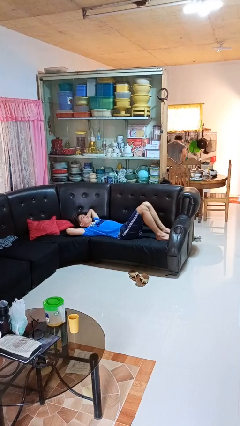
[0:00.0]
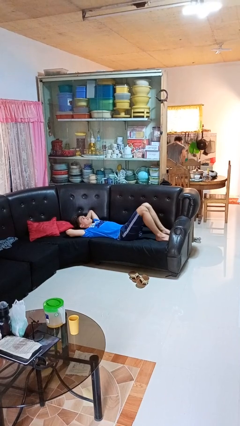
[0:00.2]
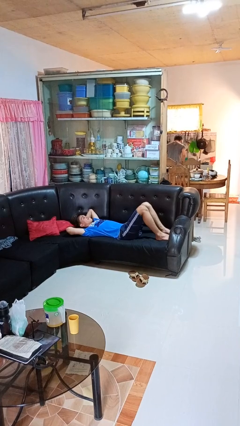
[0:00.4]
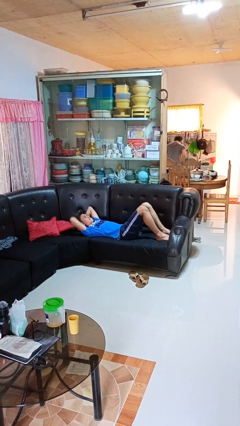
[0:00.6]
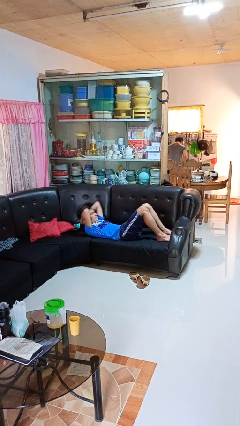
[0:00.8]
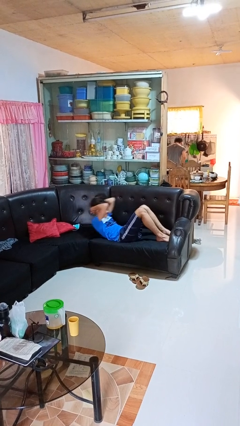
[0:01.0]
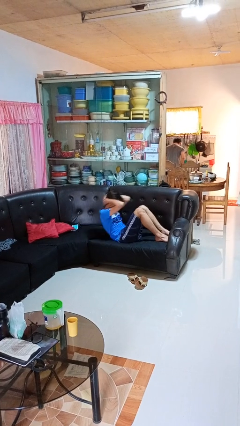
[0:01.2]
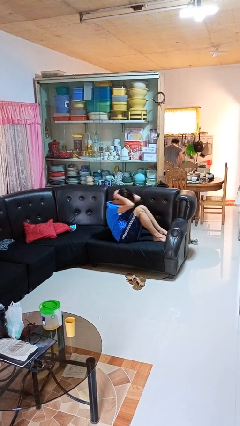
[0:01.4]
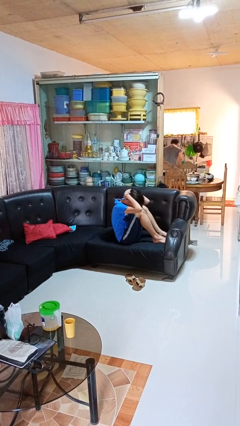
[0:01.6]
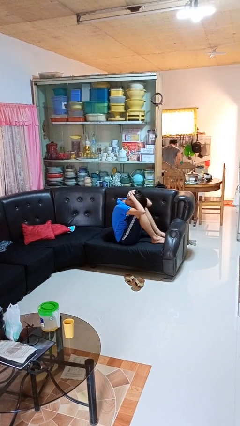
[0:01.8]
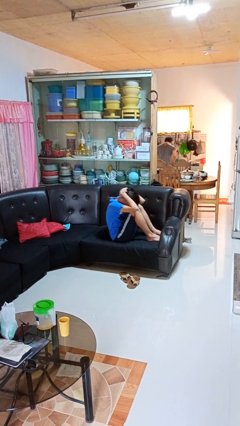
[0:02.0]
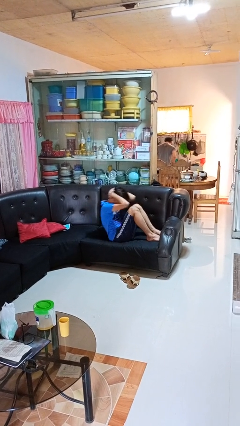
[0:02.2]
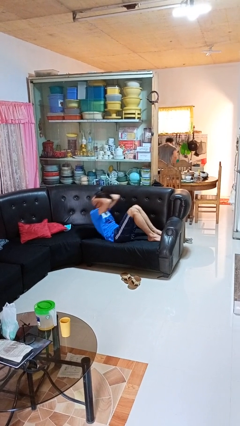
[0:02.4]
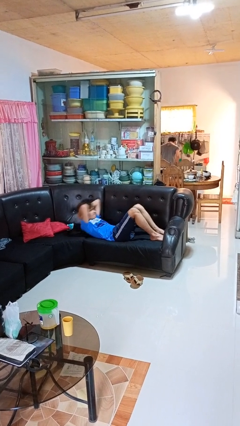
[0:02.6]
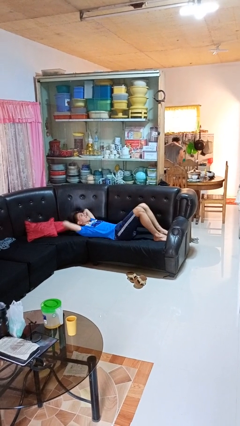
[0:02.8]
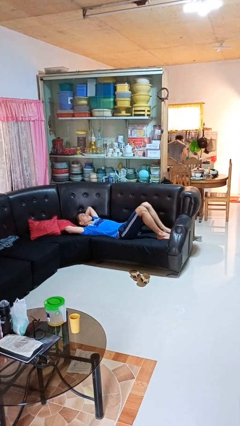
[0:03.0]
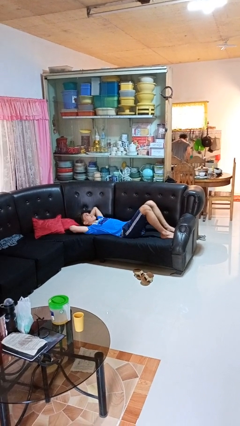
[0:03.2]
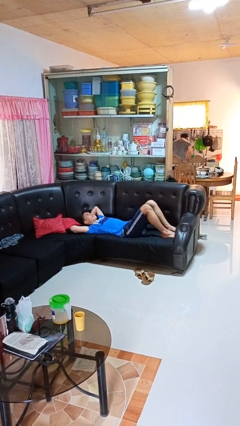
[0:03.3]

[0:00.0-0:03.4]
person exercises with situp

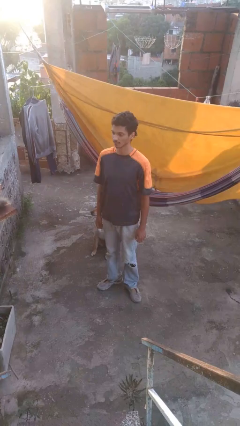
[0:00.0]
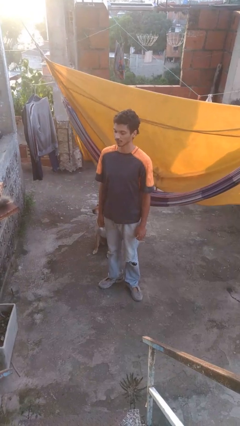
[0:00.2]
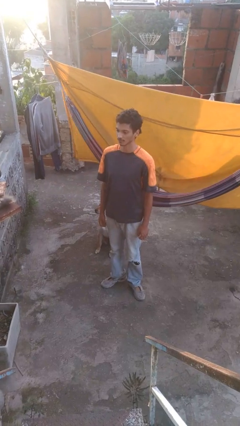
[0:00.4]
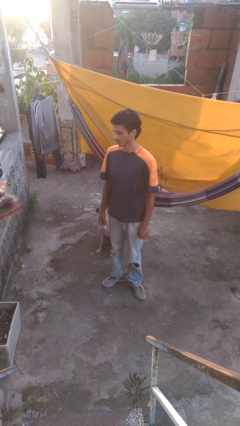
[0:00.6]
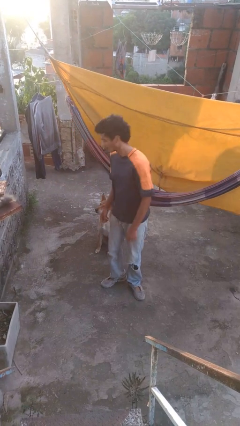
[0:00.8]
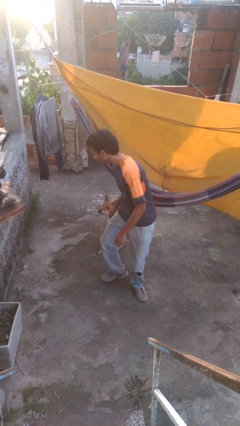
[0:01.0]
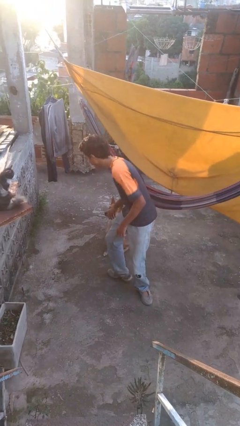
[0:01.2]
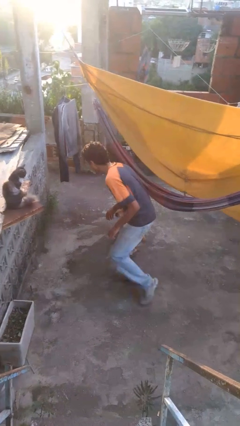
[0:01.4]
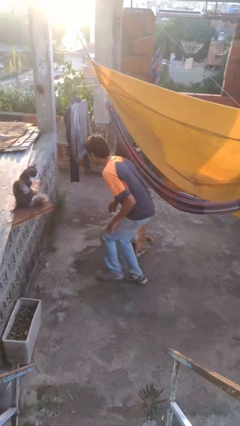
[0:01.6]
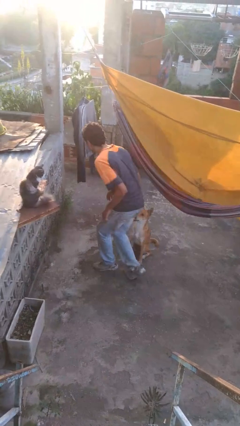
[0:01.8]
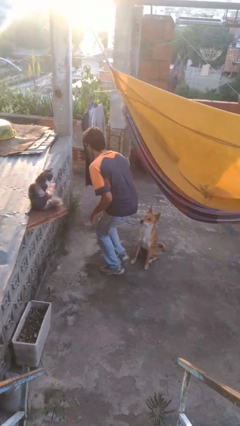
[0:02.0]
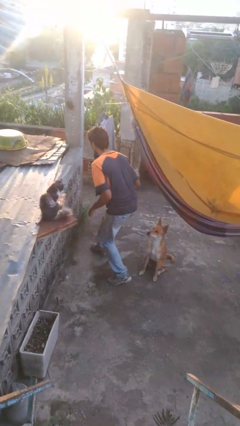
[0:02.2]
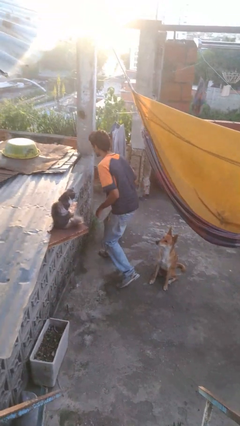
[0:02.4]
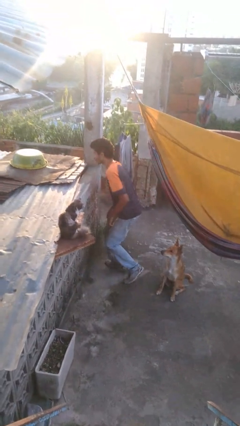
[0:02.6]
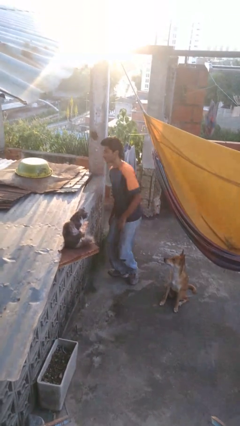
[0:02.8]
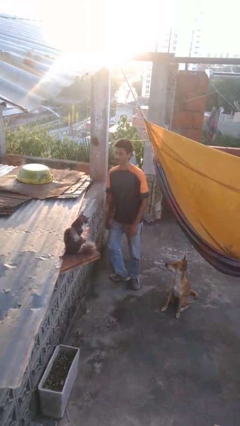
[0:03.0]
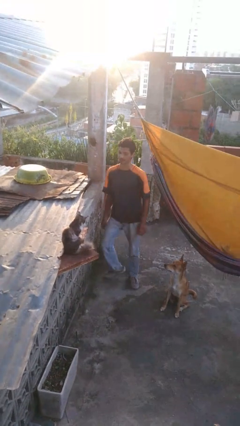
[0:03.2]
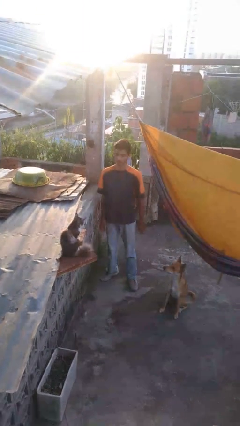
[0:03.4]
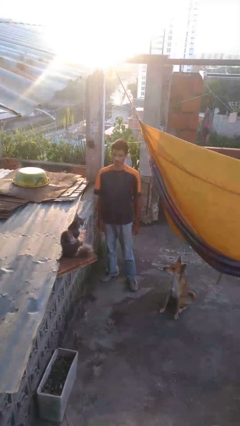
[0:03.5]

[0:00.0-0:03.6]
person walks tiptoe

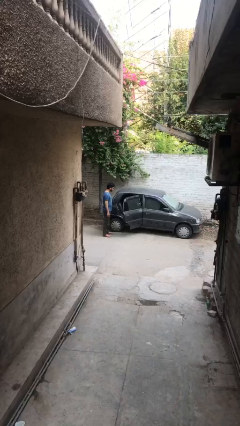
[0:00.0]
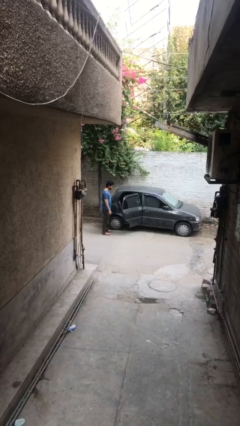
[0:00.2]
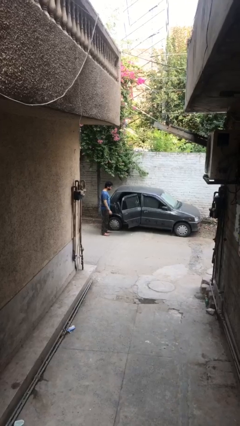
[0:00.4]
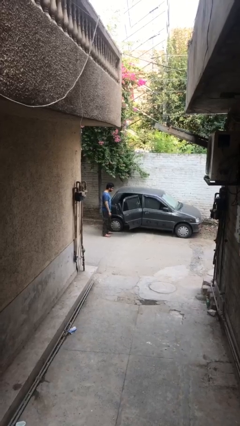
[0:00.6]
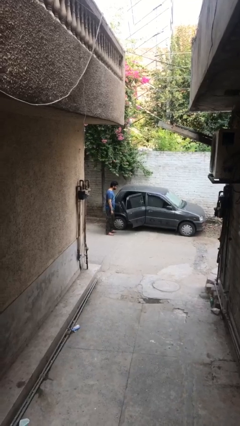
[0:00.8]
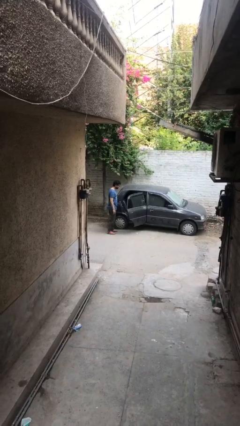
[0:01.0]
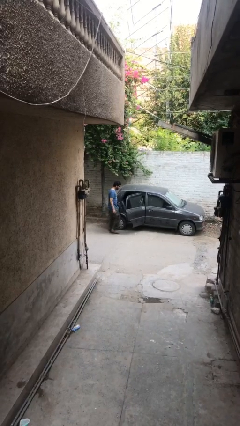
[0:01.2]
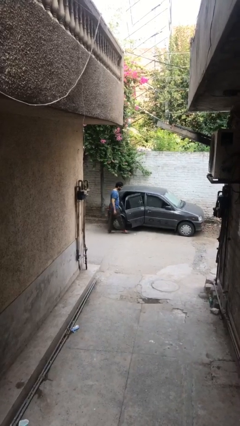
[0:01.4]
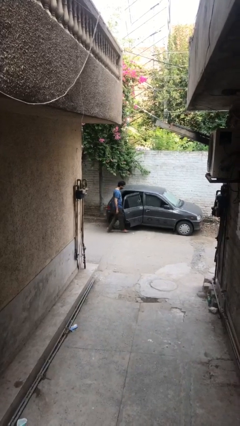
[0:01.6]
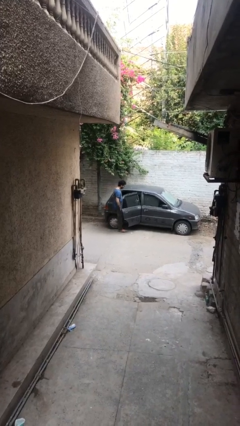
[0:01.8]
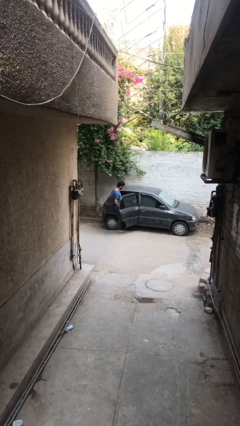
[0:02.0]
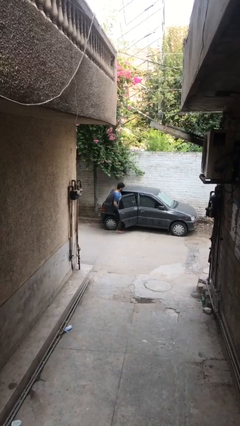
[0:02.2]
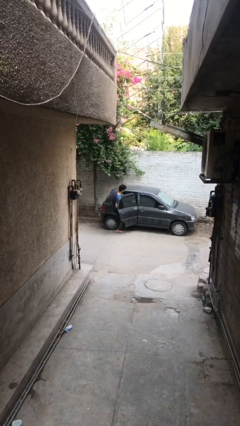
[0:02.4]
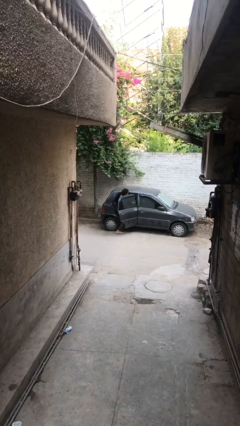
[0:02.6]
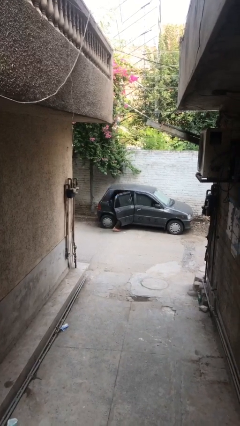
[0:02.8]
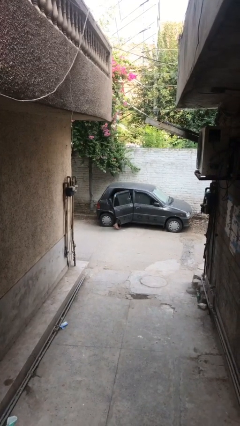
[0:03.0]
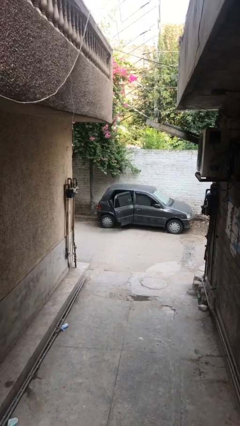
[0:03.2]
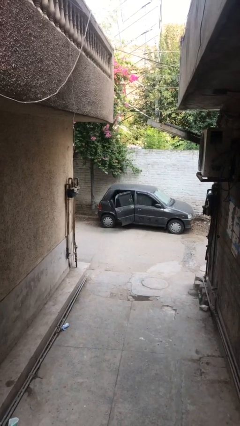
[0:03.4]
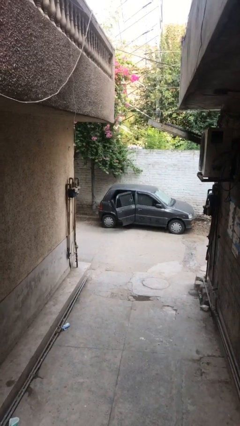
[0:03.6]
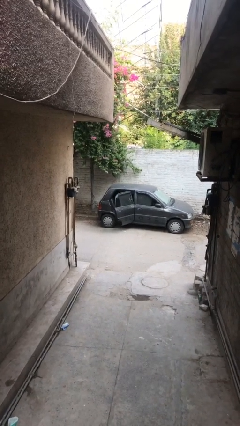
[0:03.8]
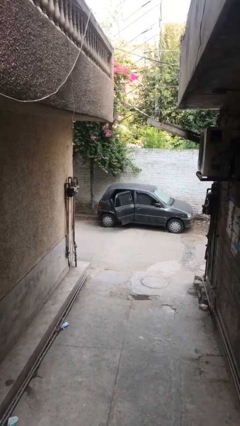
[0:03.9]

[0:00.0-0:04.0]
person enters car

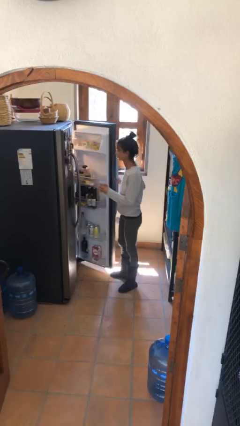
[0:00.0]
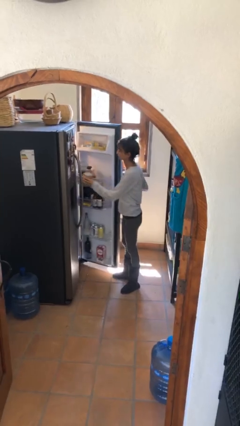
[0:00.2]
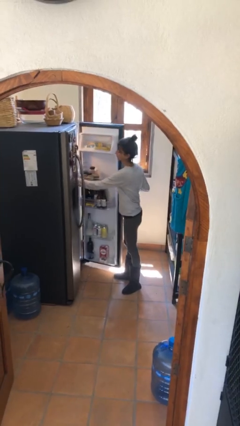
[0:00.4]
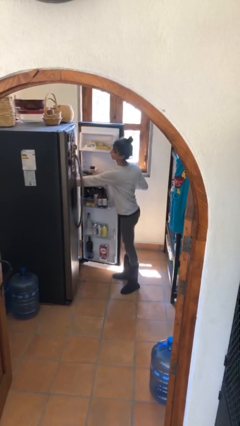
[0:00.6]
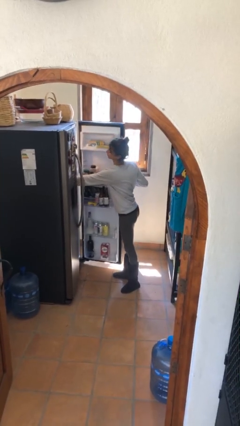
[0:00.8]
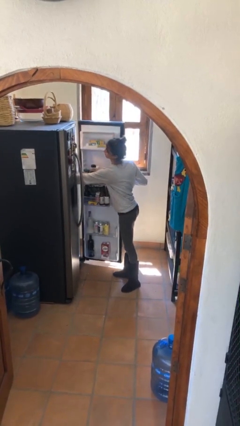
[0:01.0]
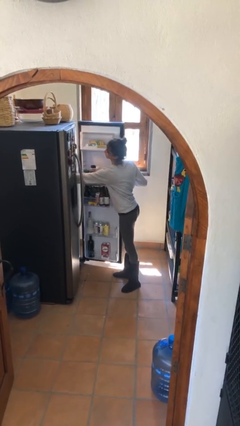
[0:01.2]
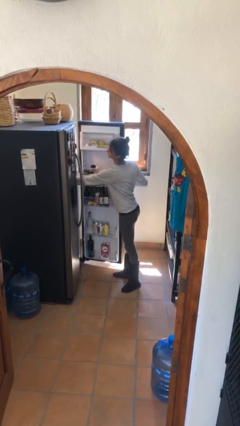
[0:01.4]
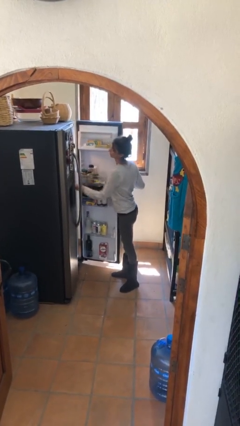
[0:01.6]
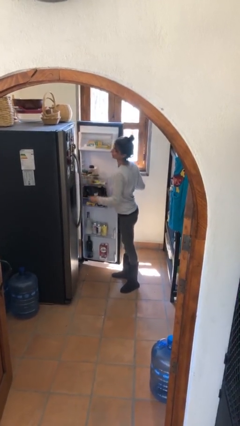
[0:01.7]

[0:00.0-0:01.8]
person puts object into refrigerator

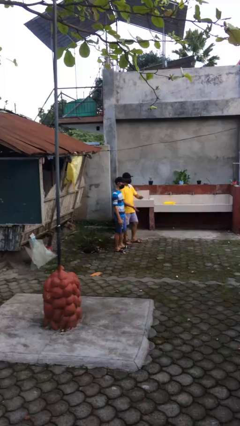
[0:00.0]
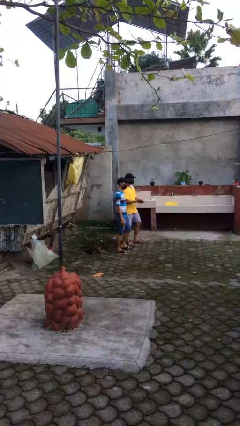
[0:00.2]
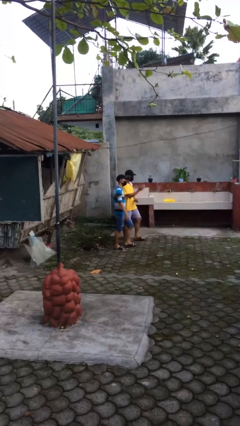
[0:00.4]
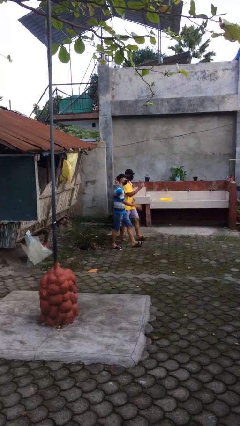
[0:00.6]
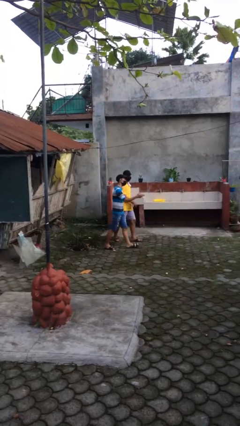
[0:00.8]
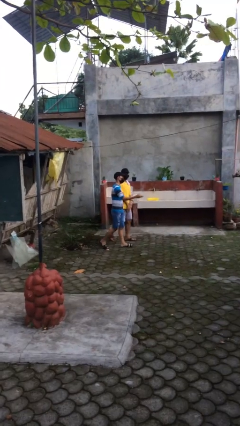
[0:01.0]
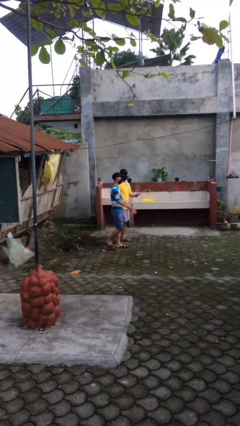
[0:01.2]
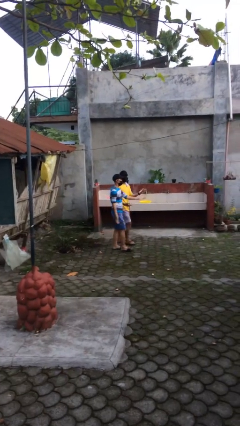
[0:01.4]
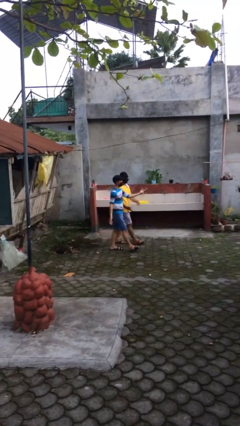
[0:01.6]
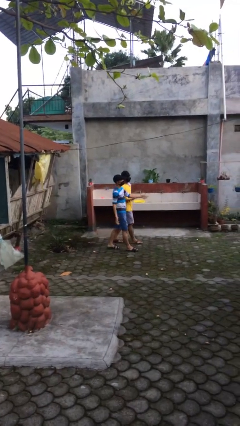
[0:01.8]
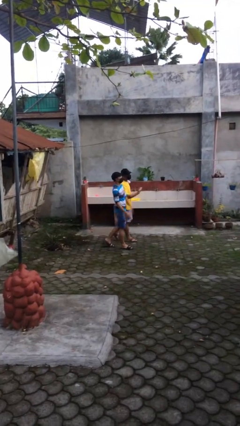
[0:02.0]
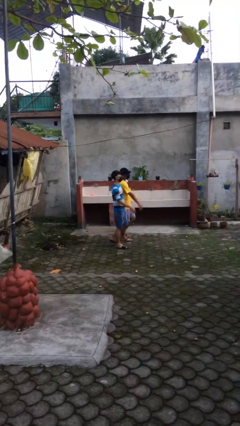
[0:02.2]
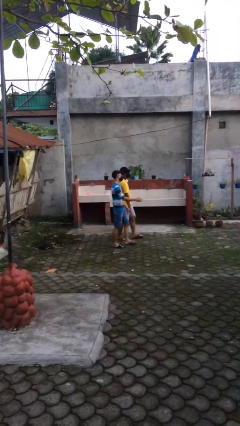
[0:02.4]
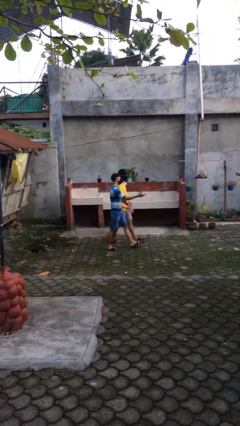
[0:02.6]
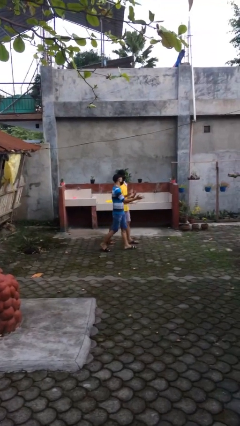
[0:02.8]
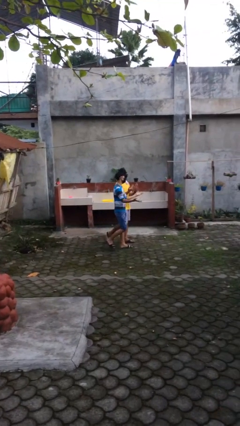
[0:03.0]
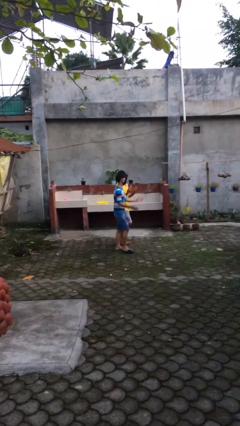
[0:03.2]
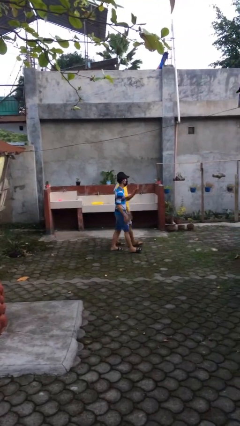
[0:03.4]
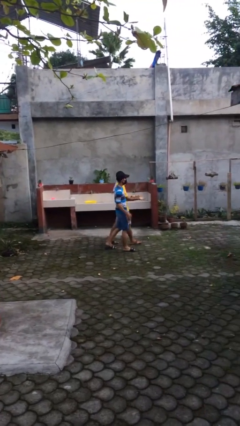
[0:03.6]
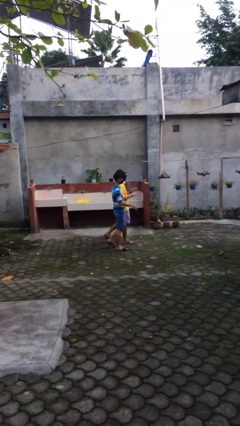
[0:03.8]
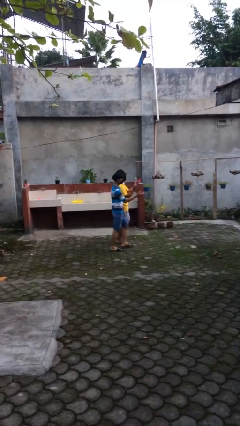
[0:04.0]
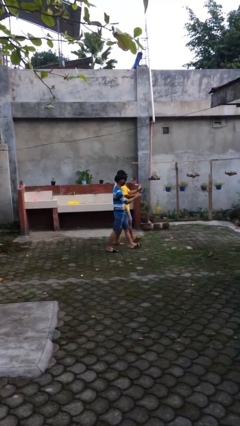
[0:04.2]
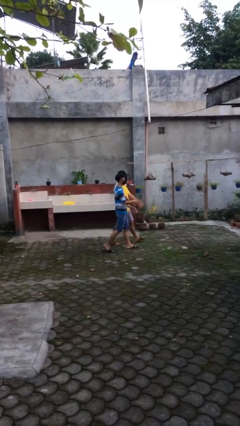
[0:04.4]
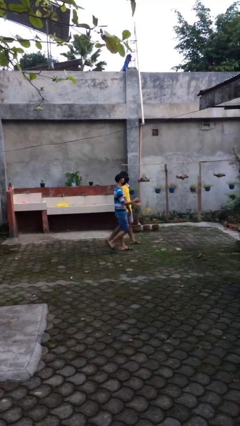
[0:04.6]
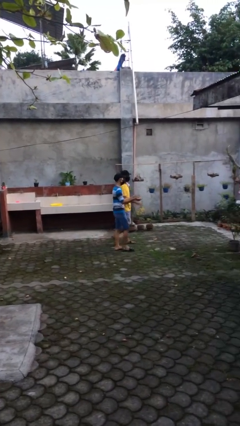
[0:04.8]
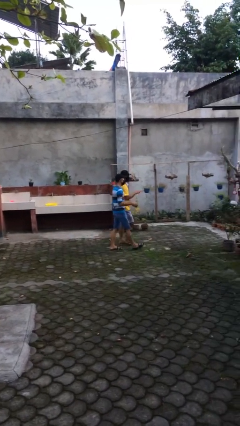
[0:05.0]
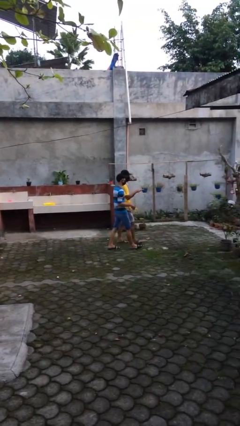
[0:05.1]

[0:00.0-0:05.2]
person talks to person
